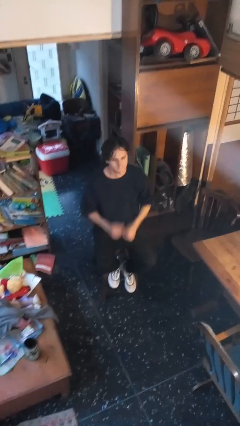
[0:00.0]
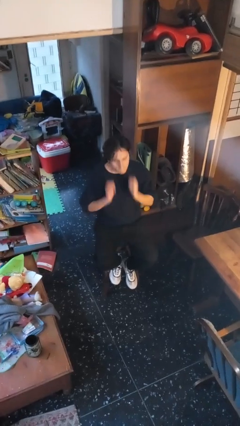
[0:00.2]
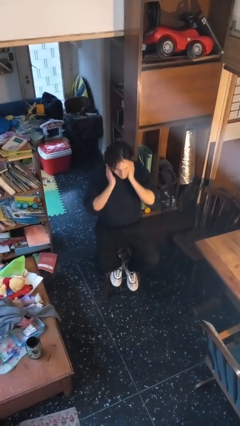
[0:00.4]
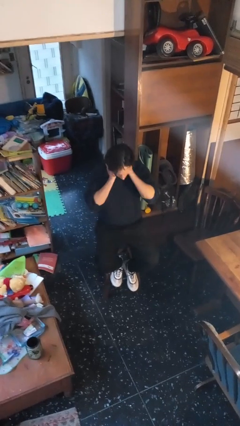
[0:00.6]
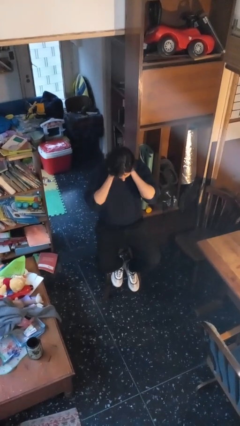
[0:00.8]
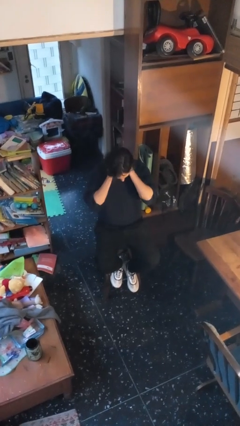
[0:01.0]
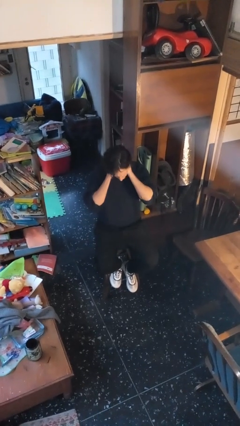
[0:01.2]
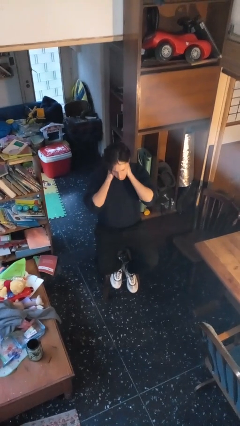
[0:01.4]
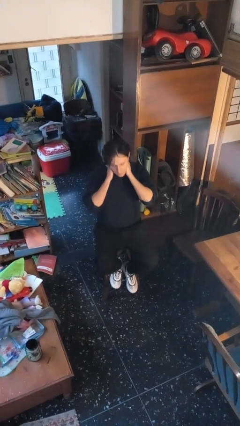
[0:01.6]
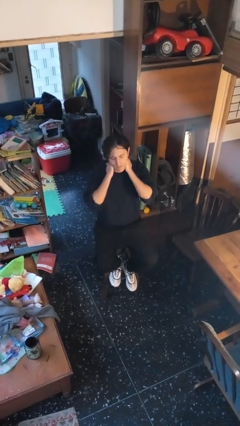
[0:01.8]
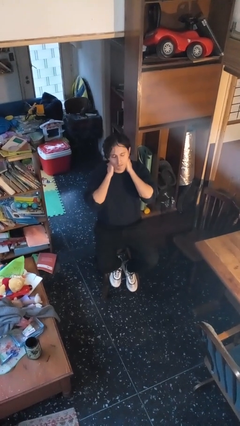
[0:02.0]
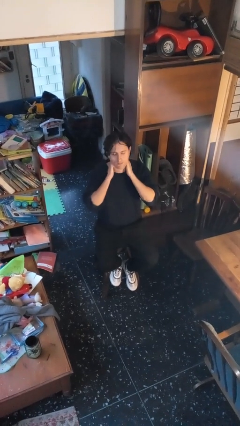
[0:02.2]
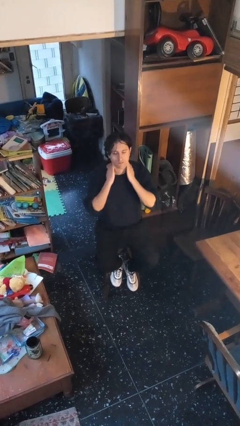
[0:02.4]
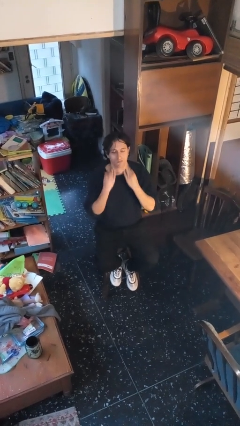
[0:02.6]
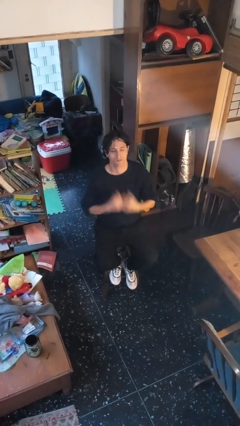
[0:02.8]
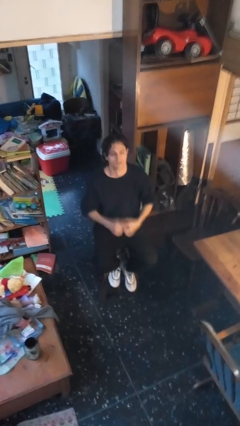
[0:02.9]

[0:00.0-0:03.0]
person rubs neck

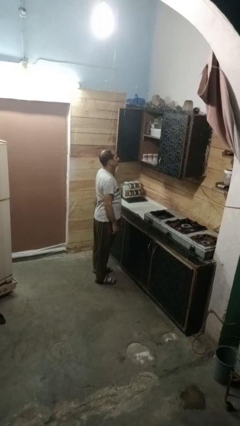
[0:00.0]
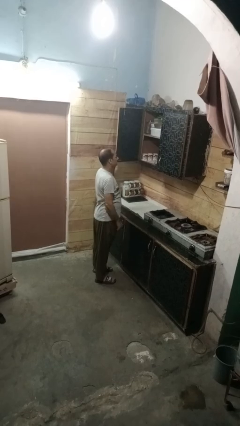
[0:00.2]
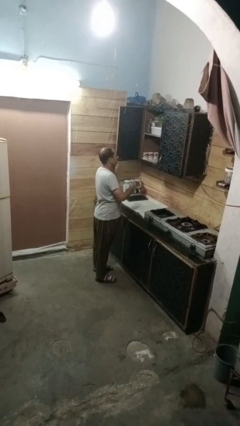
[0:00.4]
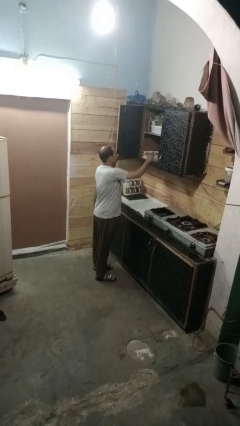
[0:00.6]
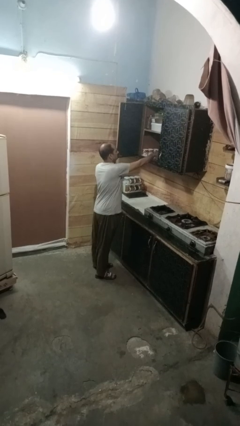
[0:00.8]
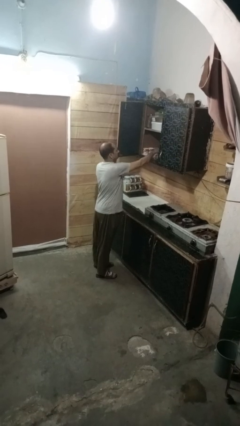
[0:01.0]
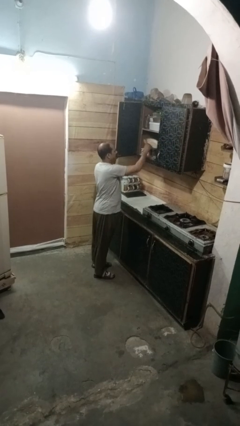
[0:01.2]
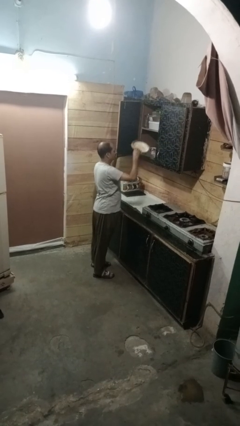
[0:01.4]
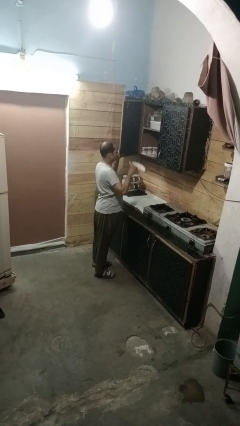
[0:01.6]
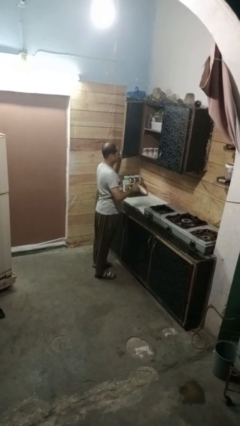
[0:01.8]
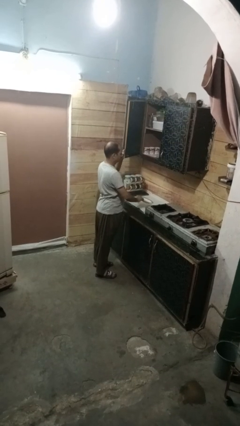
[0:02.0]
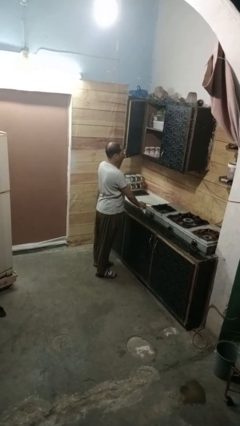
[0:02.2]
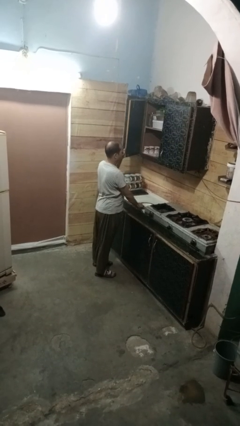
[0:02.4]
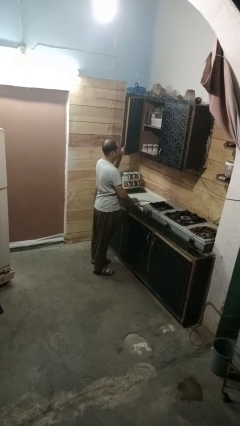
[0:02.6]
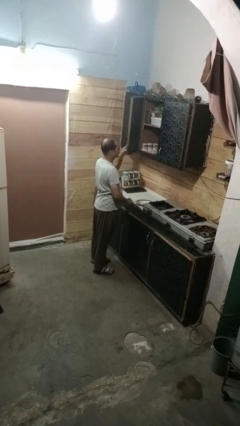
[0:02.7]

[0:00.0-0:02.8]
person takes object from cabinet

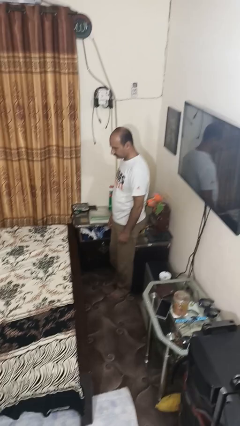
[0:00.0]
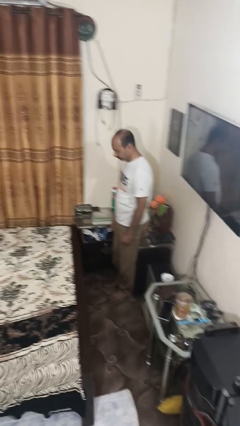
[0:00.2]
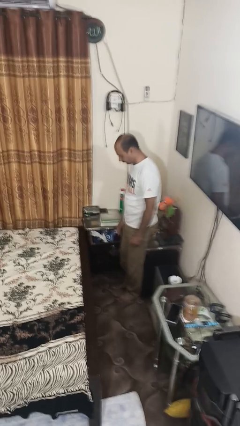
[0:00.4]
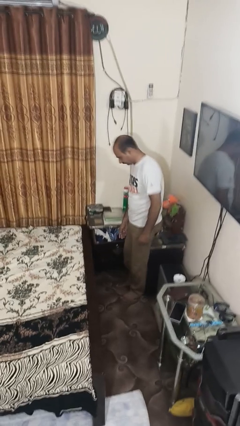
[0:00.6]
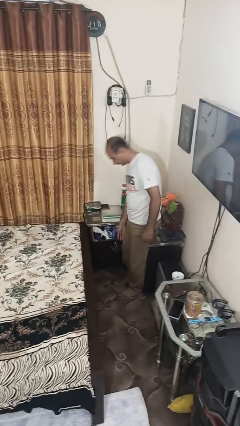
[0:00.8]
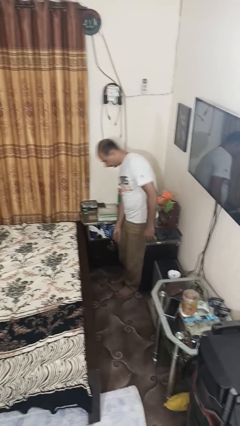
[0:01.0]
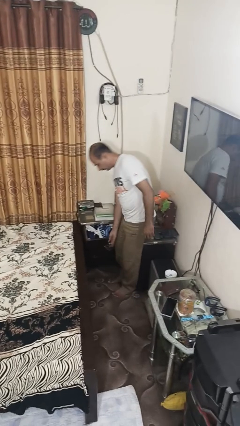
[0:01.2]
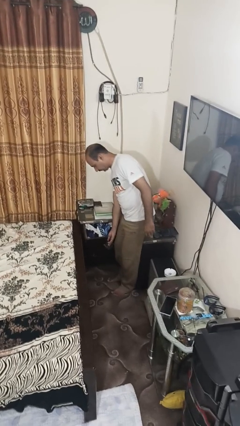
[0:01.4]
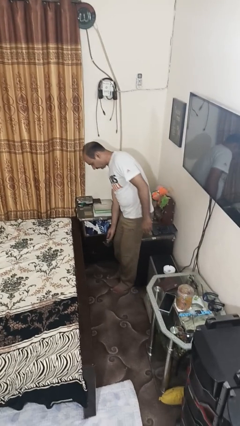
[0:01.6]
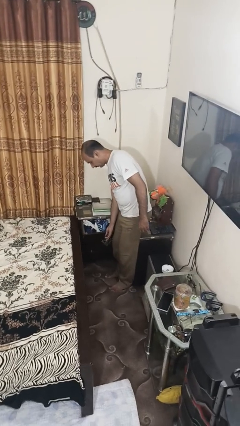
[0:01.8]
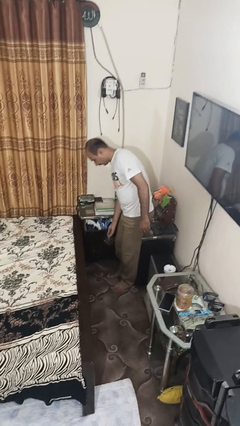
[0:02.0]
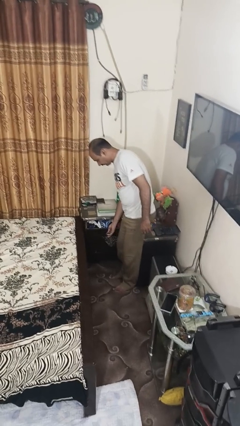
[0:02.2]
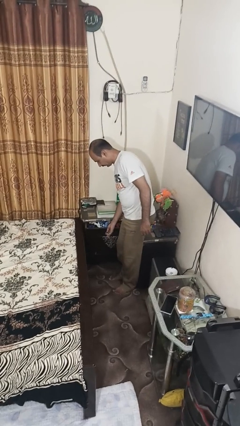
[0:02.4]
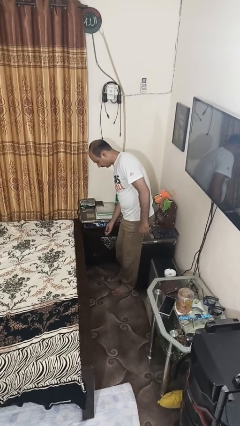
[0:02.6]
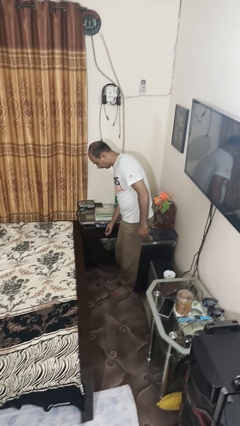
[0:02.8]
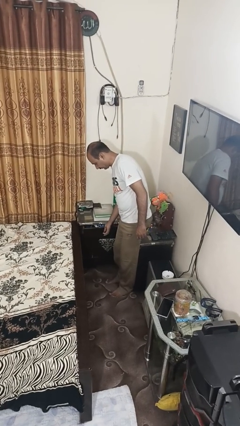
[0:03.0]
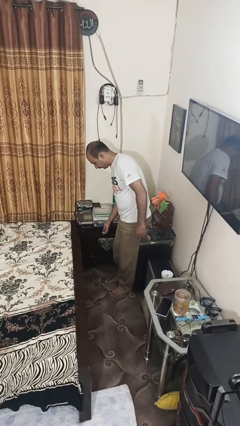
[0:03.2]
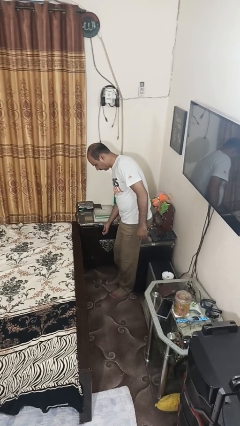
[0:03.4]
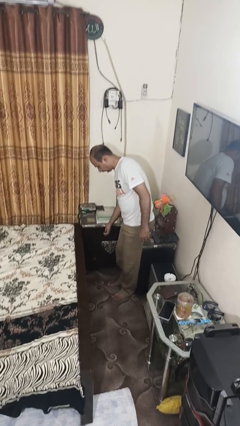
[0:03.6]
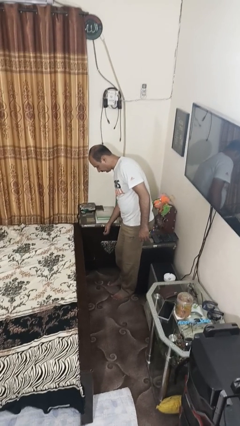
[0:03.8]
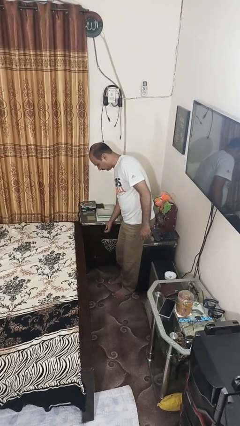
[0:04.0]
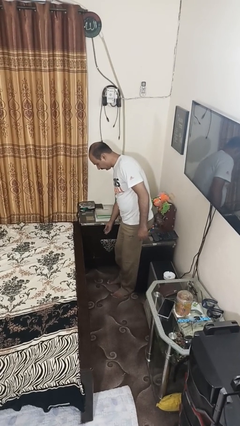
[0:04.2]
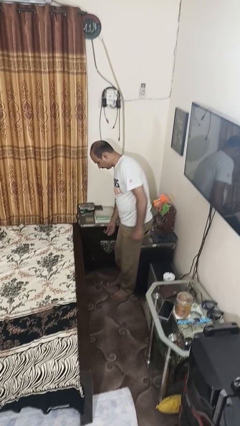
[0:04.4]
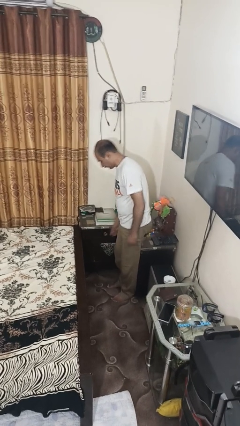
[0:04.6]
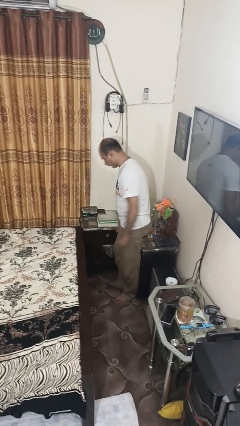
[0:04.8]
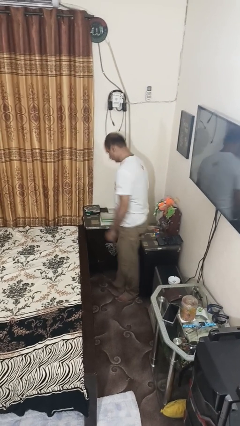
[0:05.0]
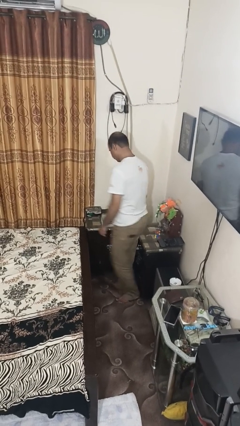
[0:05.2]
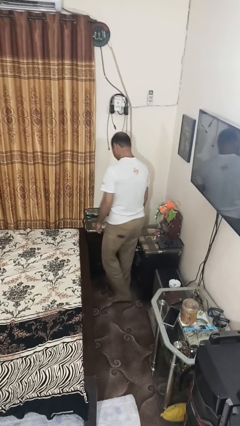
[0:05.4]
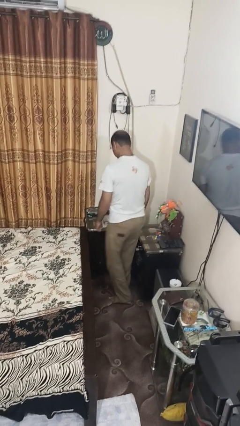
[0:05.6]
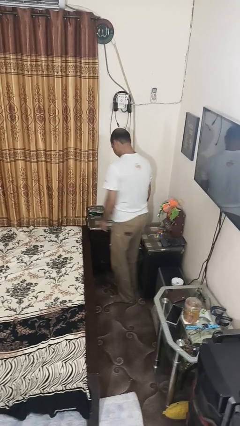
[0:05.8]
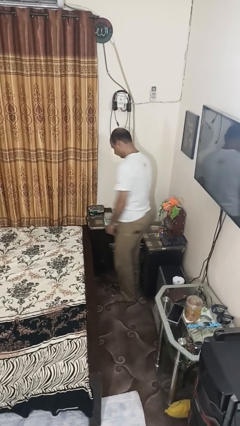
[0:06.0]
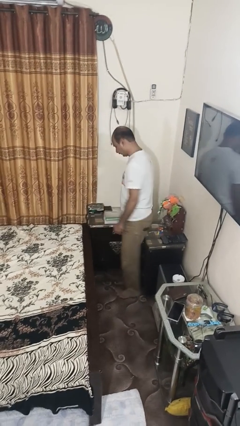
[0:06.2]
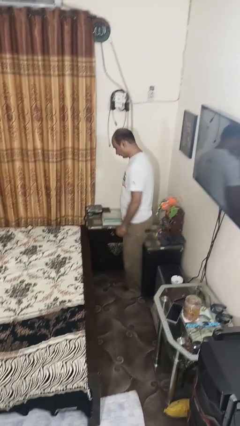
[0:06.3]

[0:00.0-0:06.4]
person closes dresser drawer

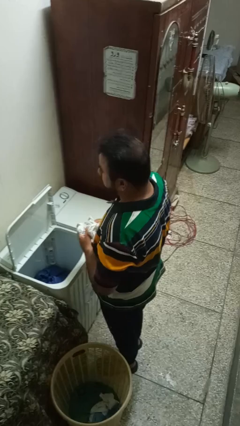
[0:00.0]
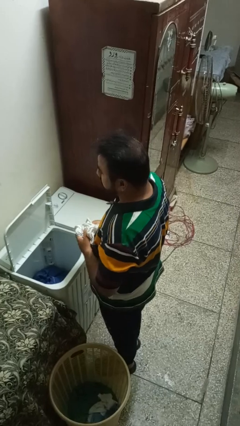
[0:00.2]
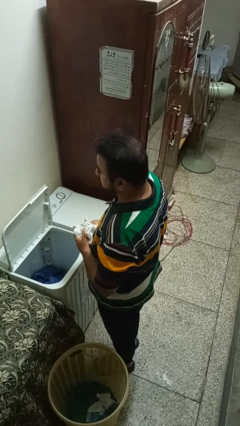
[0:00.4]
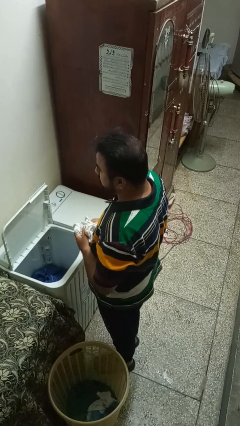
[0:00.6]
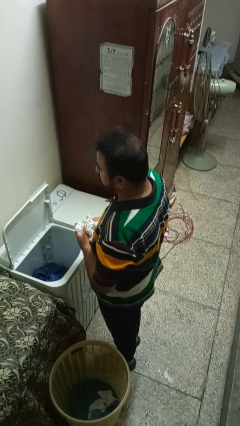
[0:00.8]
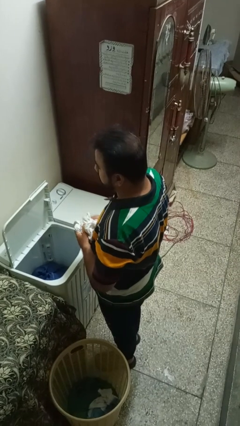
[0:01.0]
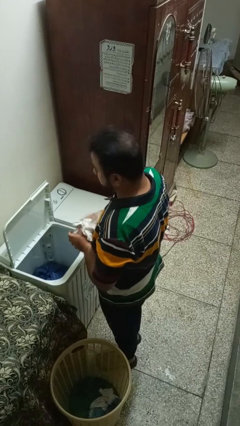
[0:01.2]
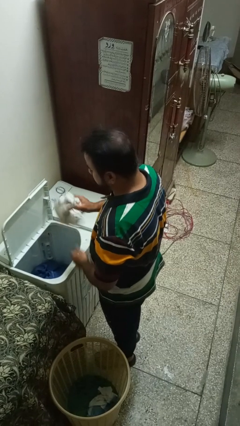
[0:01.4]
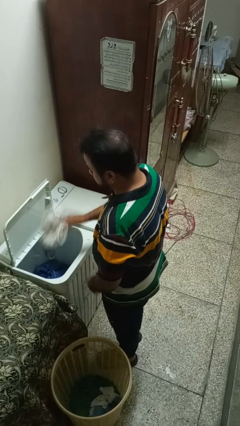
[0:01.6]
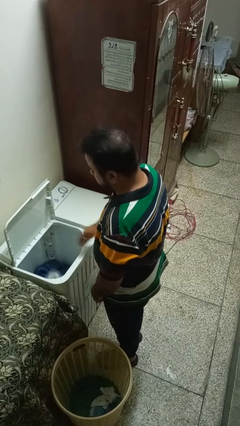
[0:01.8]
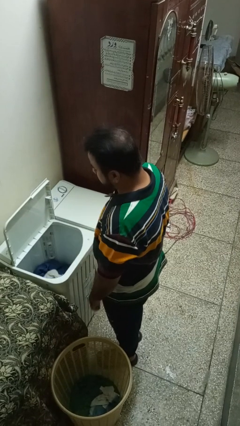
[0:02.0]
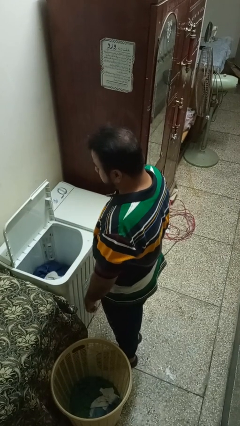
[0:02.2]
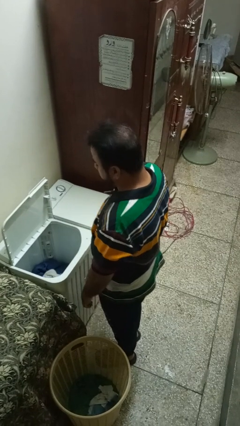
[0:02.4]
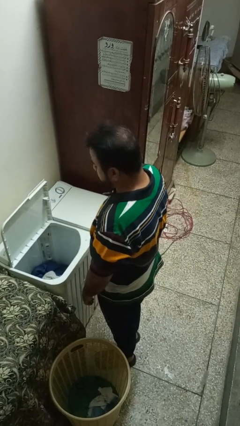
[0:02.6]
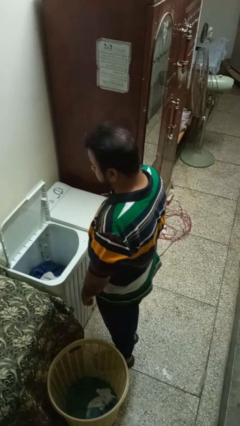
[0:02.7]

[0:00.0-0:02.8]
person loads clotheswasher

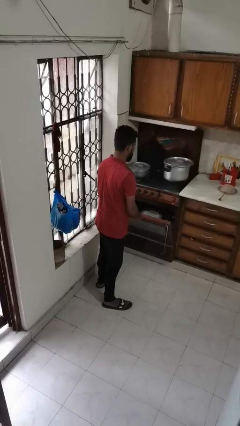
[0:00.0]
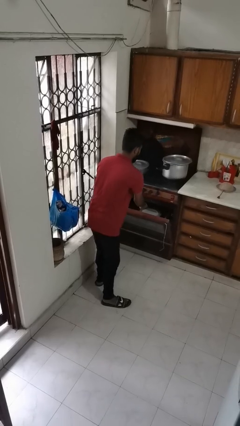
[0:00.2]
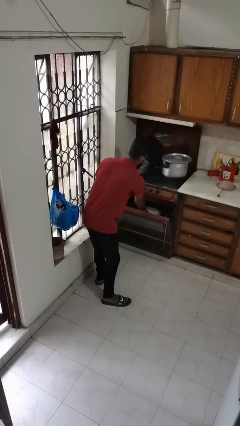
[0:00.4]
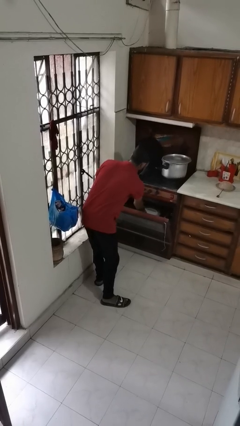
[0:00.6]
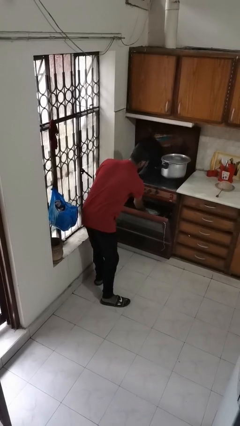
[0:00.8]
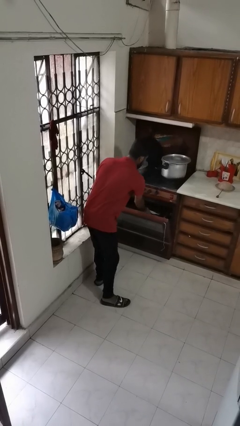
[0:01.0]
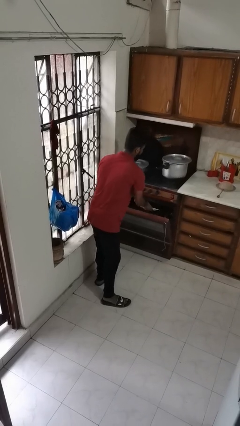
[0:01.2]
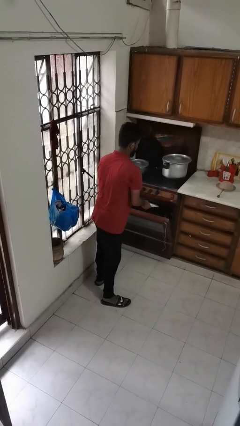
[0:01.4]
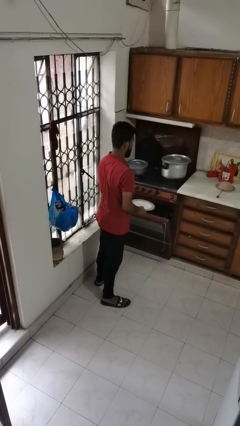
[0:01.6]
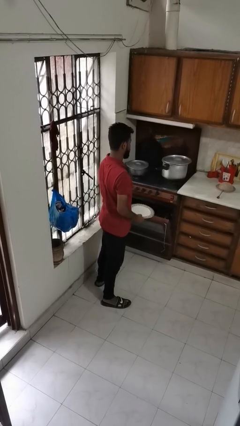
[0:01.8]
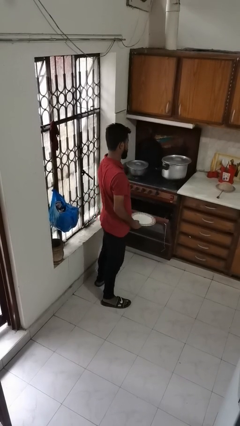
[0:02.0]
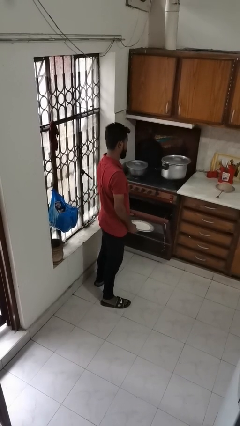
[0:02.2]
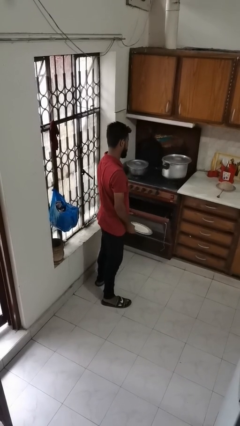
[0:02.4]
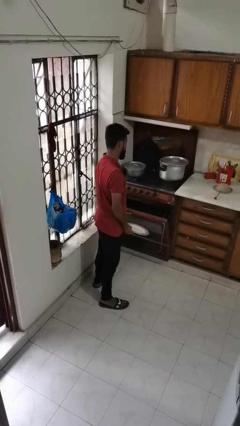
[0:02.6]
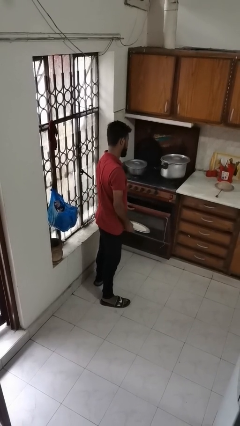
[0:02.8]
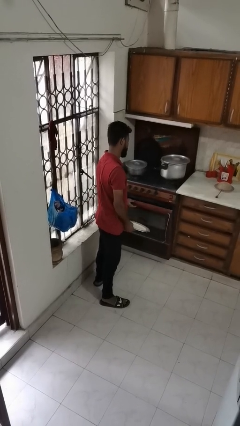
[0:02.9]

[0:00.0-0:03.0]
person takes object from oven
